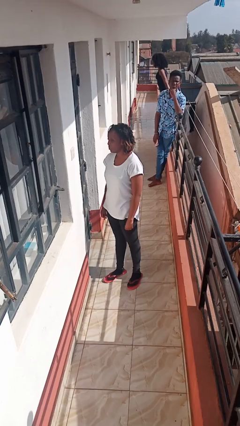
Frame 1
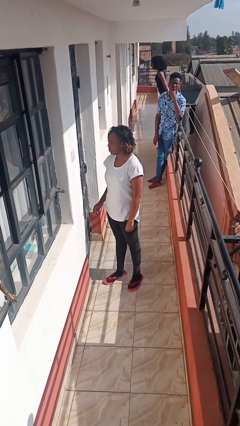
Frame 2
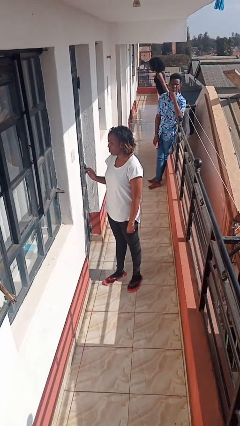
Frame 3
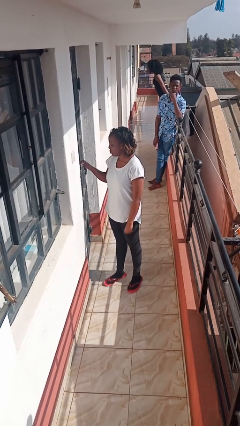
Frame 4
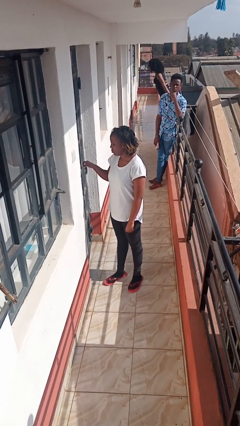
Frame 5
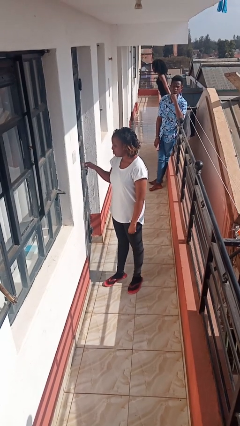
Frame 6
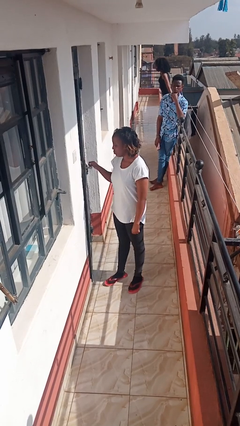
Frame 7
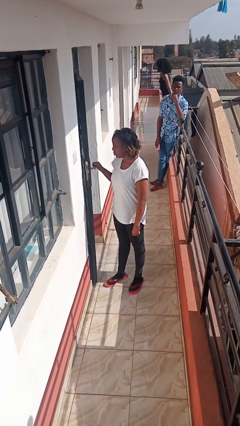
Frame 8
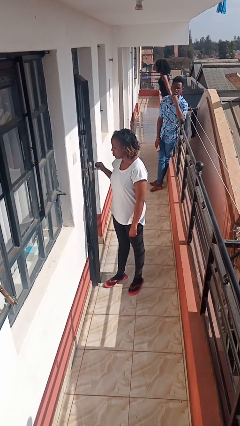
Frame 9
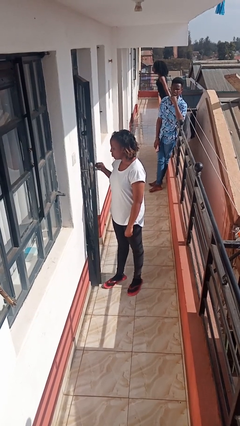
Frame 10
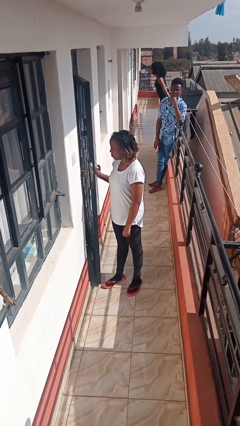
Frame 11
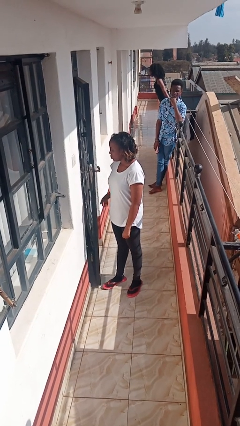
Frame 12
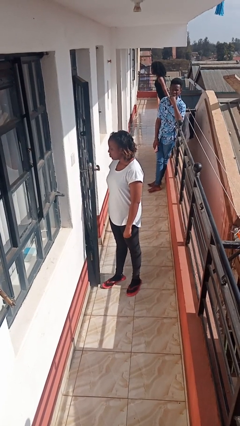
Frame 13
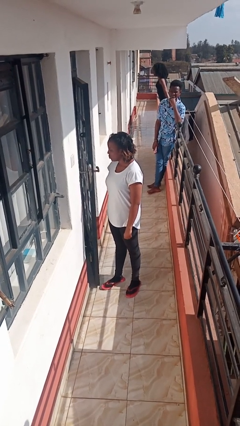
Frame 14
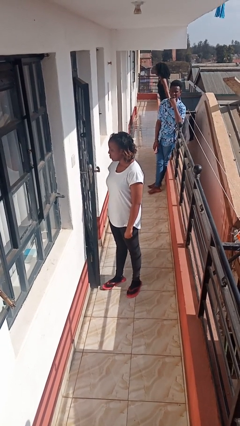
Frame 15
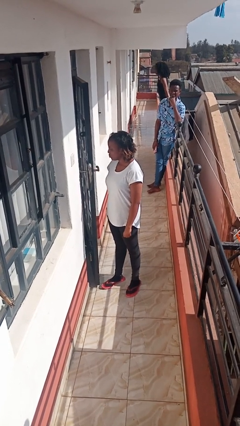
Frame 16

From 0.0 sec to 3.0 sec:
person opens facility door

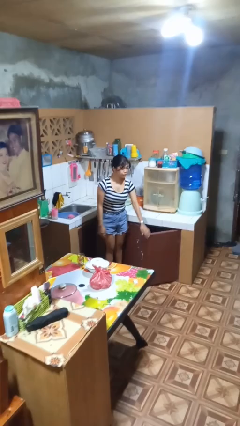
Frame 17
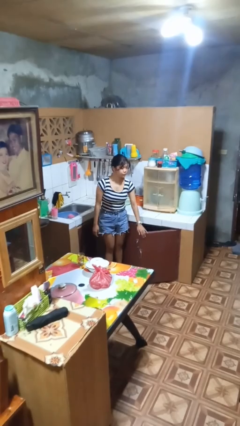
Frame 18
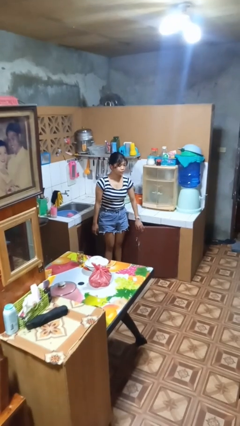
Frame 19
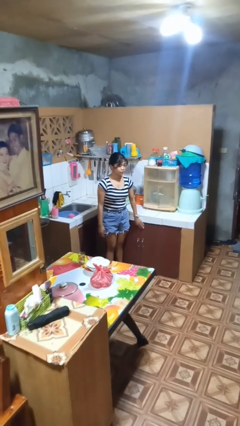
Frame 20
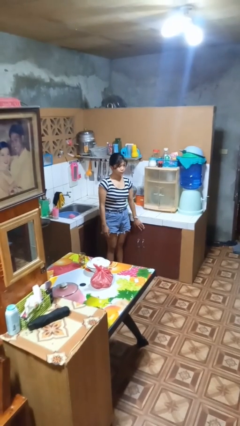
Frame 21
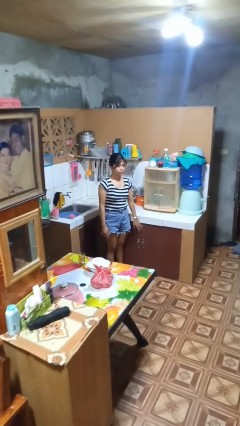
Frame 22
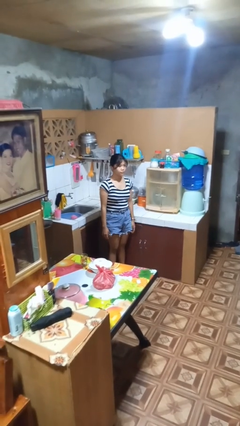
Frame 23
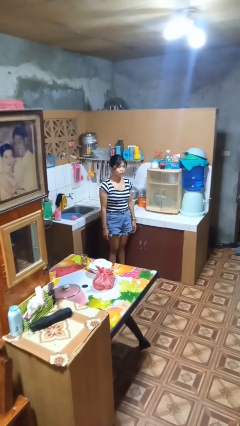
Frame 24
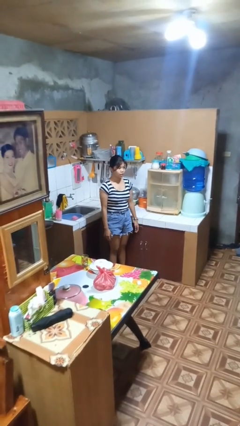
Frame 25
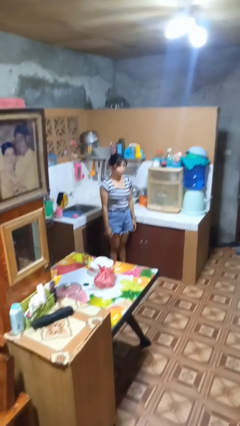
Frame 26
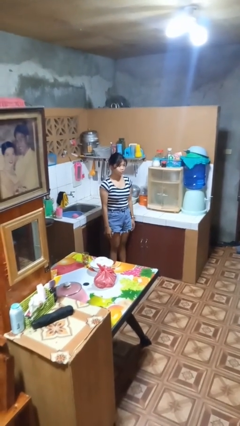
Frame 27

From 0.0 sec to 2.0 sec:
person closes cabinet

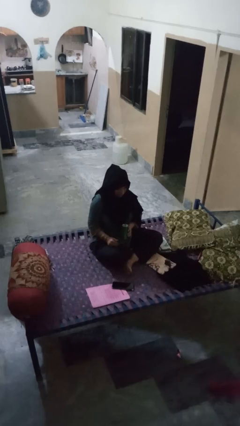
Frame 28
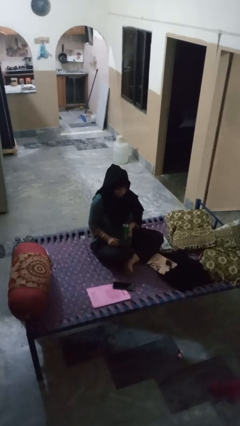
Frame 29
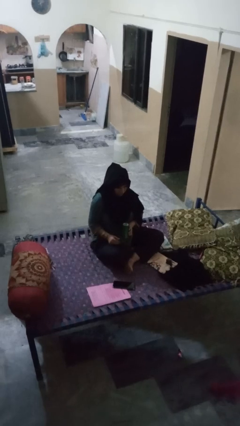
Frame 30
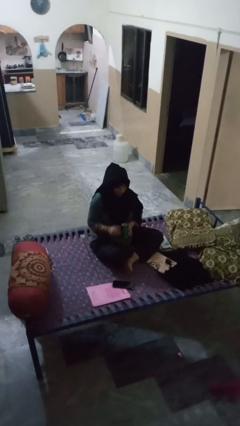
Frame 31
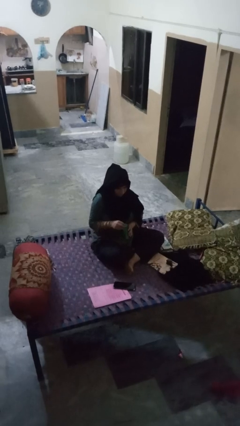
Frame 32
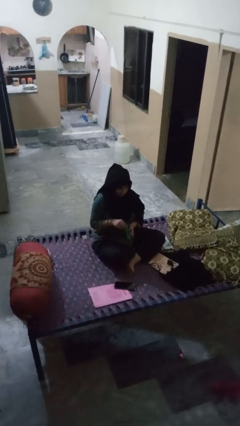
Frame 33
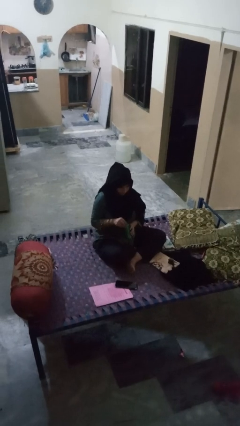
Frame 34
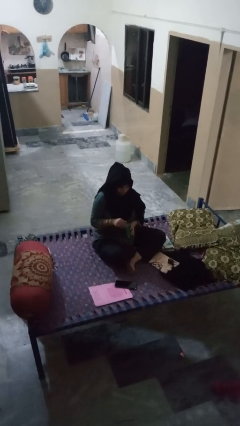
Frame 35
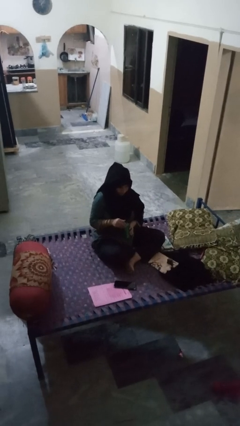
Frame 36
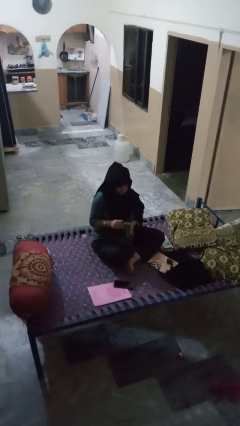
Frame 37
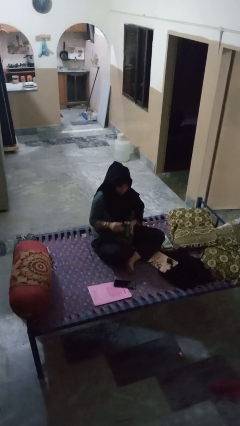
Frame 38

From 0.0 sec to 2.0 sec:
person opens can with can opener

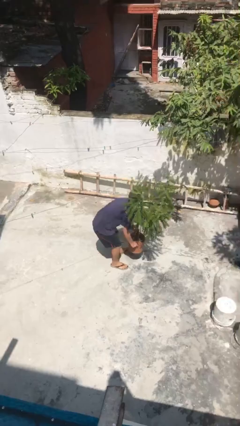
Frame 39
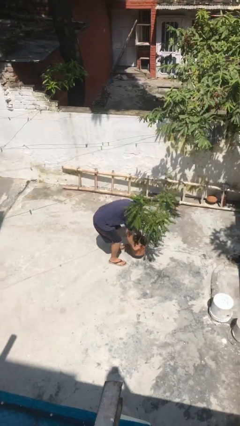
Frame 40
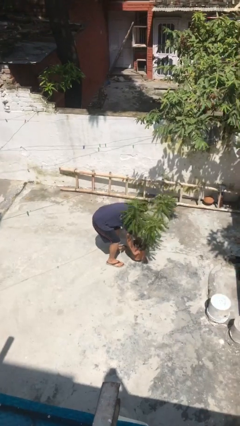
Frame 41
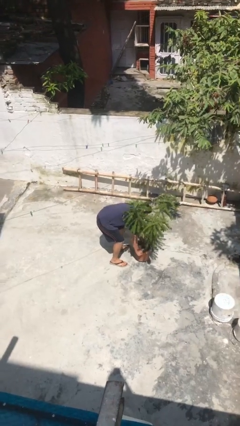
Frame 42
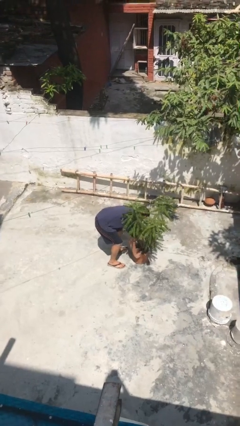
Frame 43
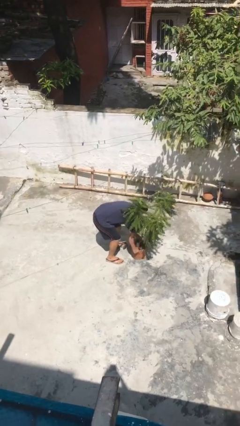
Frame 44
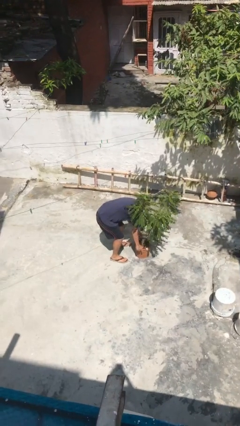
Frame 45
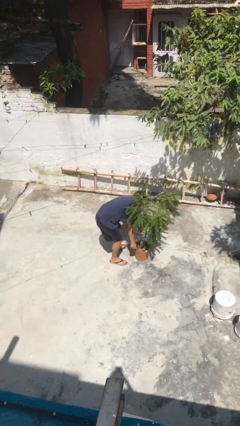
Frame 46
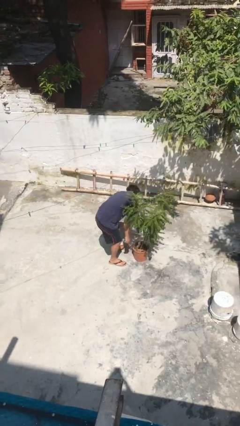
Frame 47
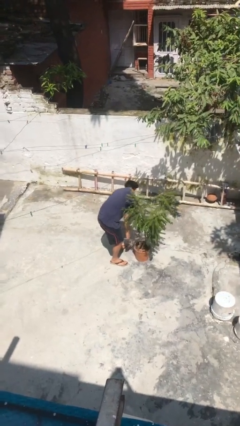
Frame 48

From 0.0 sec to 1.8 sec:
person puts down object on floor

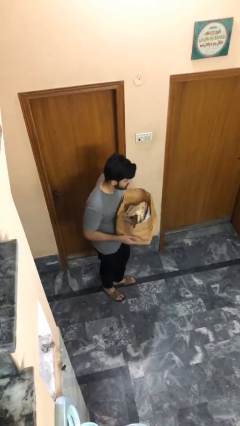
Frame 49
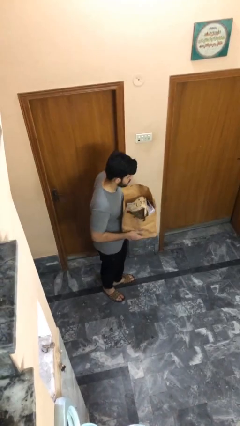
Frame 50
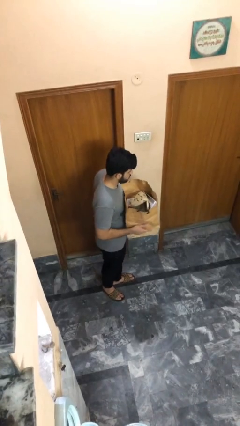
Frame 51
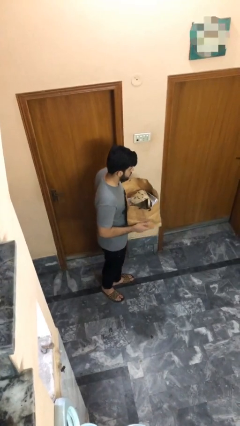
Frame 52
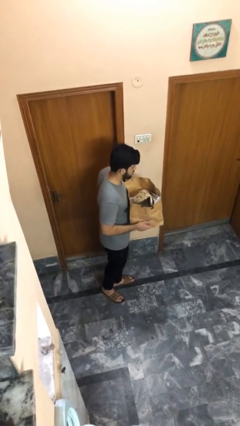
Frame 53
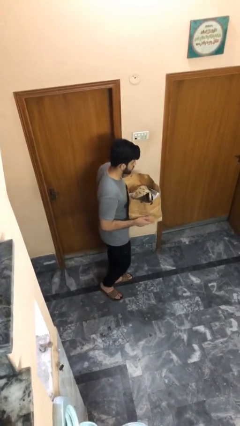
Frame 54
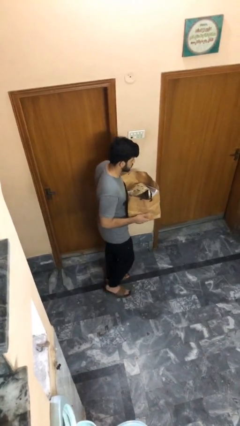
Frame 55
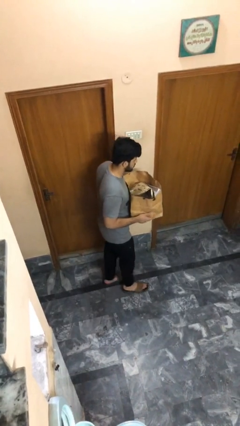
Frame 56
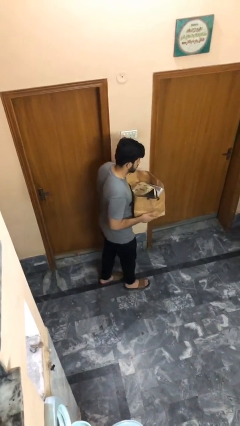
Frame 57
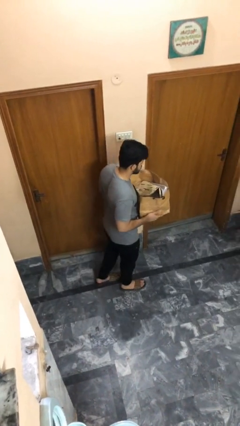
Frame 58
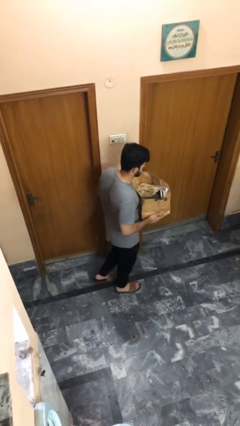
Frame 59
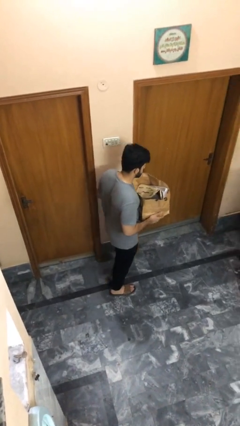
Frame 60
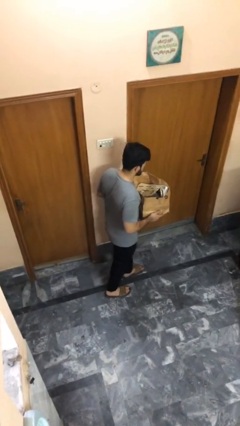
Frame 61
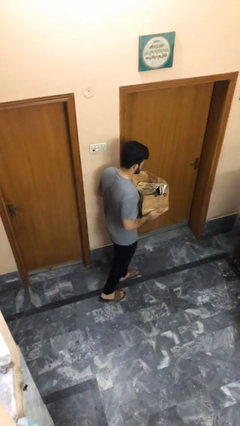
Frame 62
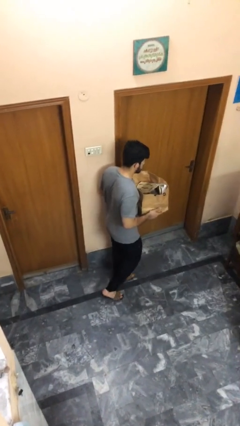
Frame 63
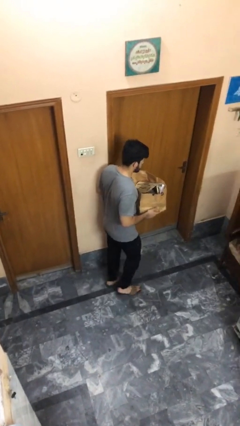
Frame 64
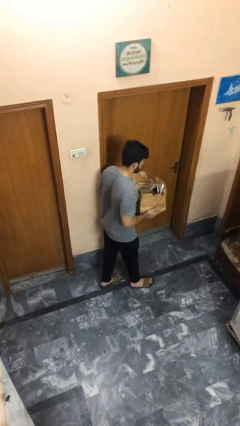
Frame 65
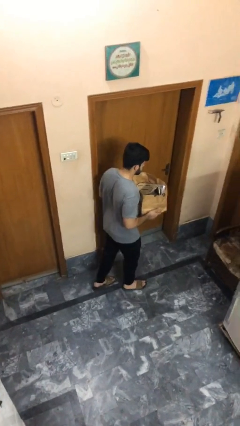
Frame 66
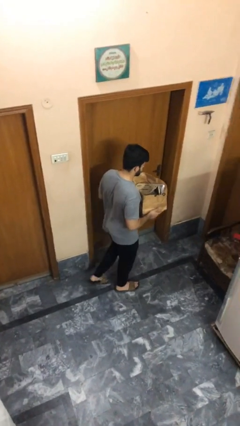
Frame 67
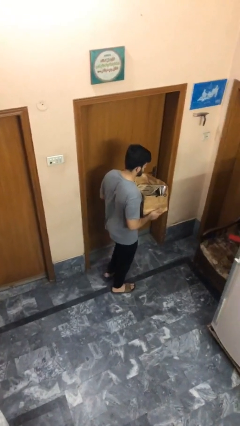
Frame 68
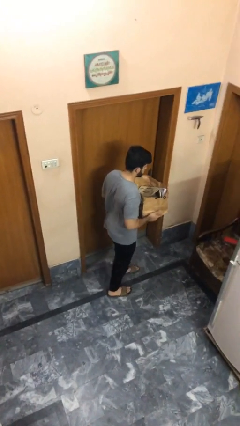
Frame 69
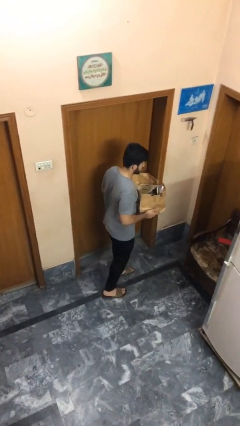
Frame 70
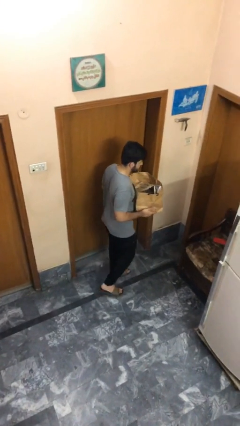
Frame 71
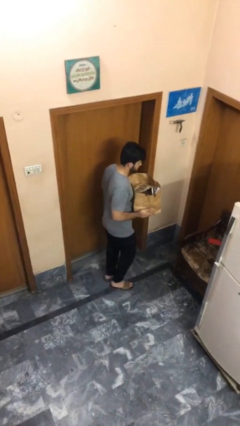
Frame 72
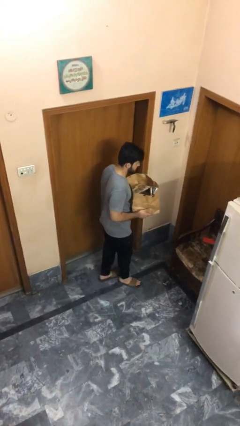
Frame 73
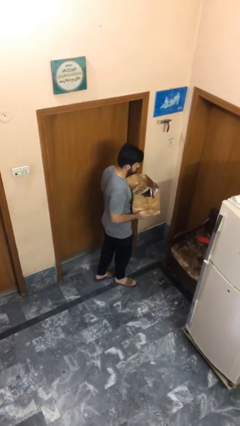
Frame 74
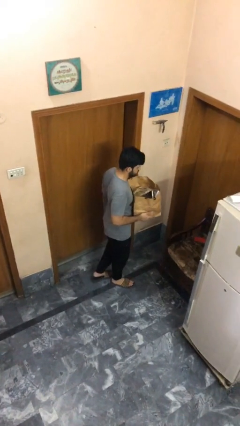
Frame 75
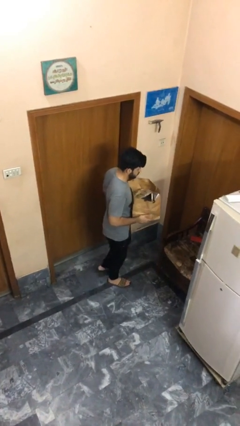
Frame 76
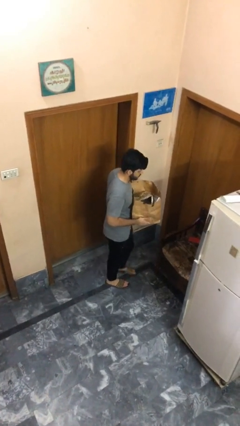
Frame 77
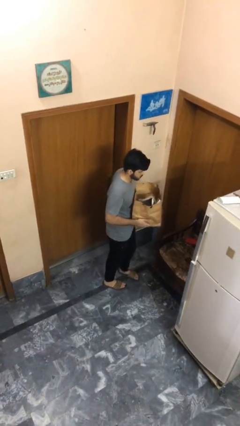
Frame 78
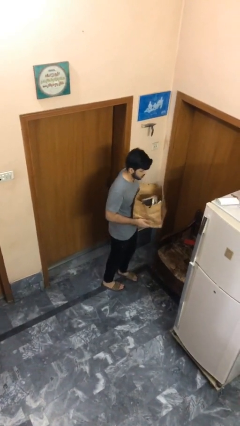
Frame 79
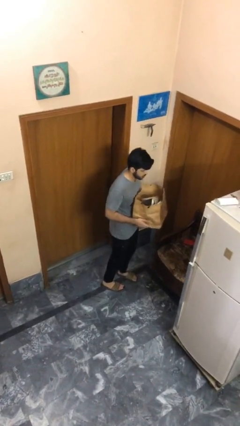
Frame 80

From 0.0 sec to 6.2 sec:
person carries groceries

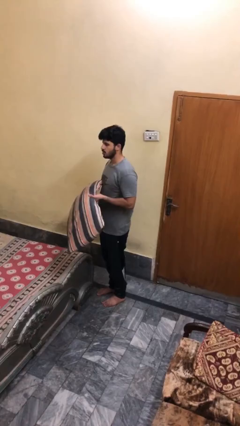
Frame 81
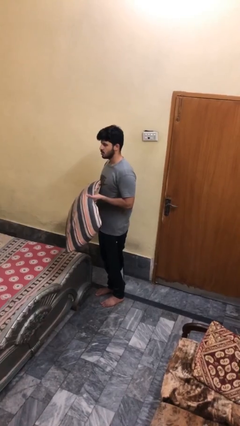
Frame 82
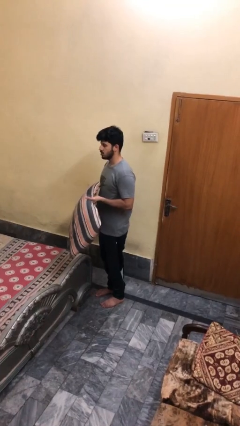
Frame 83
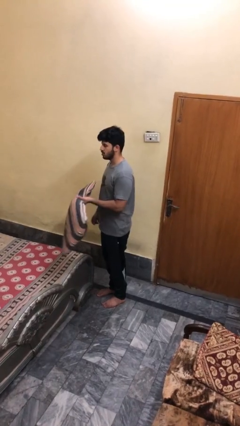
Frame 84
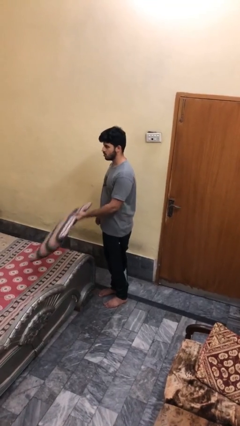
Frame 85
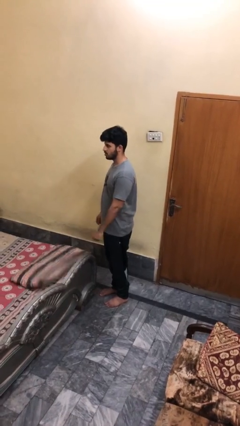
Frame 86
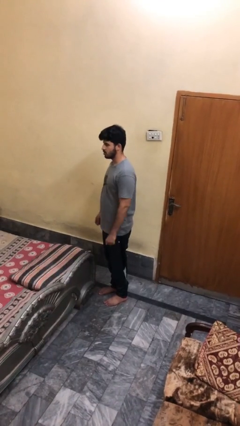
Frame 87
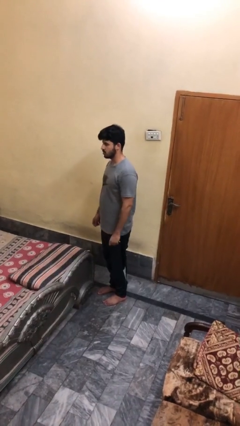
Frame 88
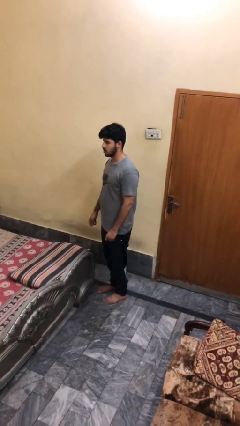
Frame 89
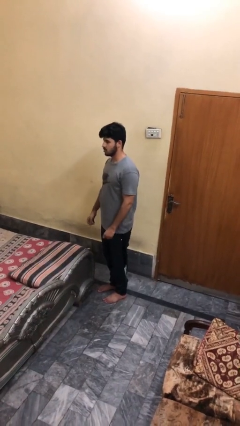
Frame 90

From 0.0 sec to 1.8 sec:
person puts down object on bed

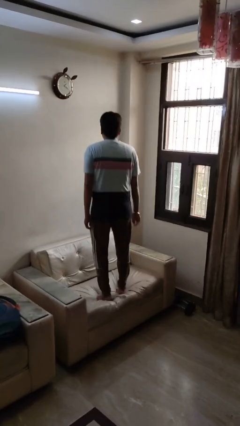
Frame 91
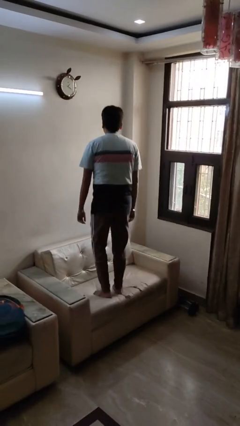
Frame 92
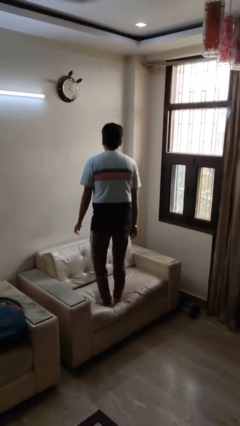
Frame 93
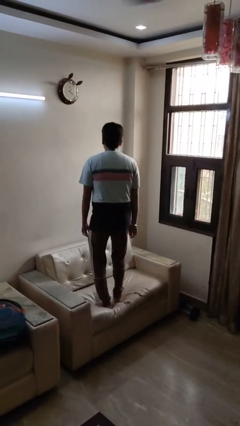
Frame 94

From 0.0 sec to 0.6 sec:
person jumps on couch
